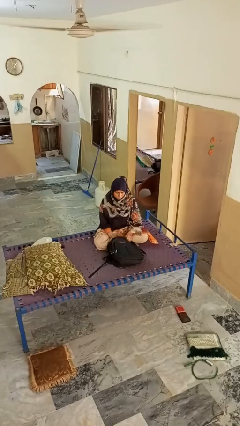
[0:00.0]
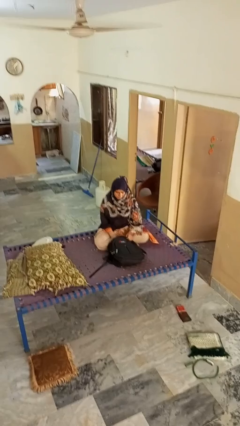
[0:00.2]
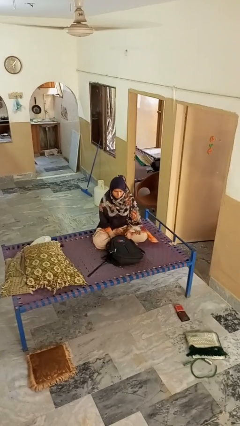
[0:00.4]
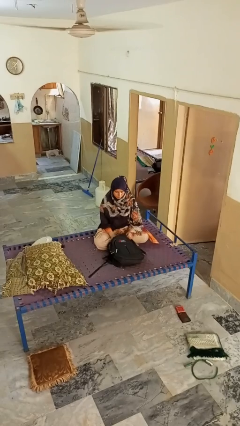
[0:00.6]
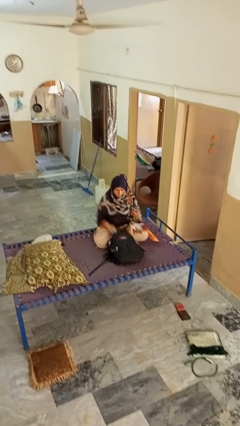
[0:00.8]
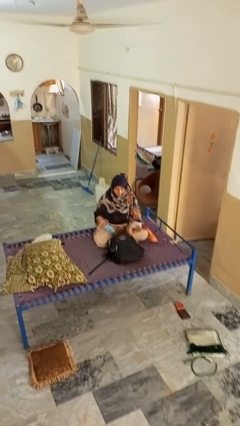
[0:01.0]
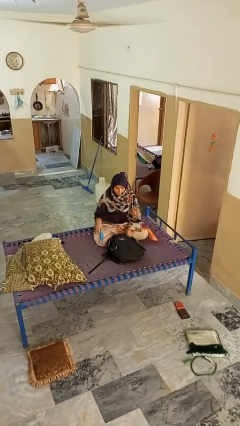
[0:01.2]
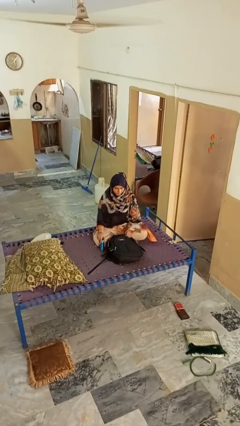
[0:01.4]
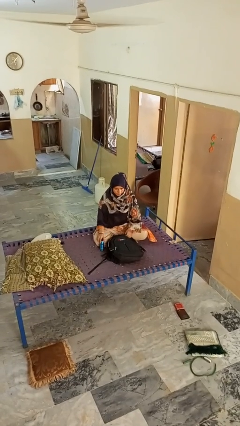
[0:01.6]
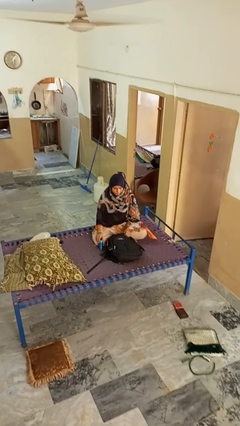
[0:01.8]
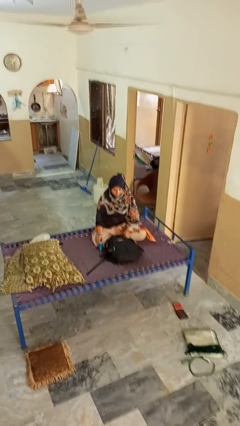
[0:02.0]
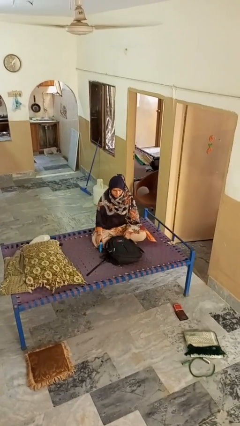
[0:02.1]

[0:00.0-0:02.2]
person takes object from bag

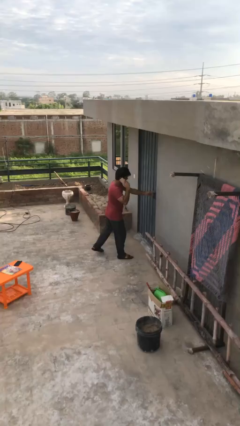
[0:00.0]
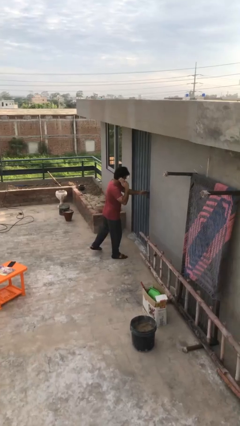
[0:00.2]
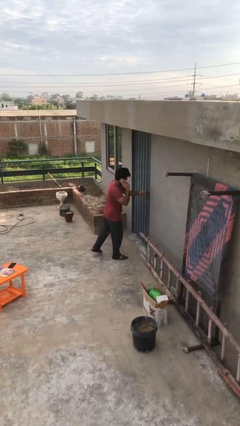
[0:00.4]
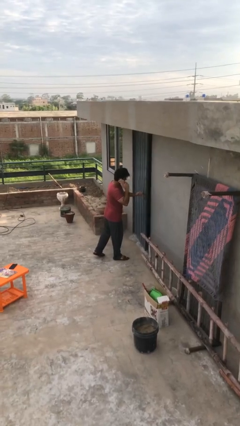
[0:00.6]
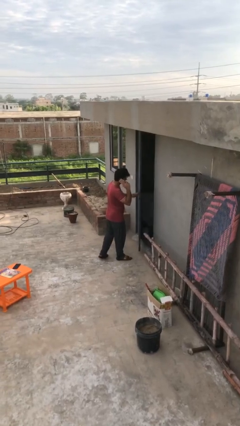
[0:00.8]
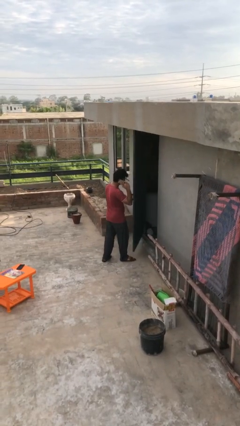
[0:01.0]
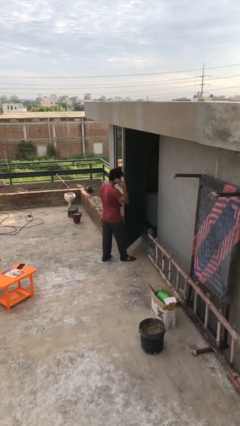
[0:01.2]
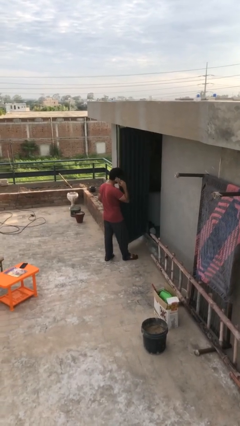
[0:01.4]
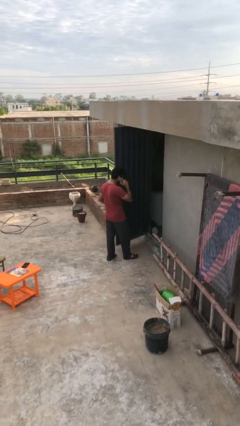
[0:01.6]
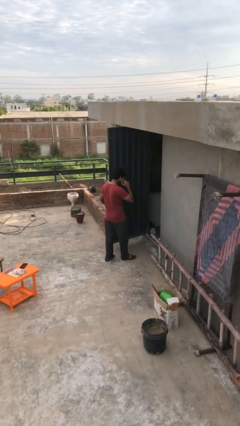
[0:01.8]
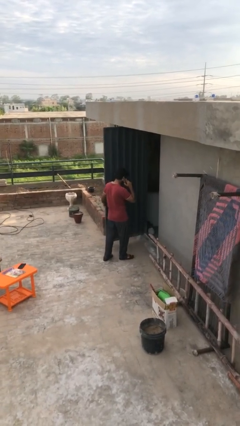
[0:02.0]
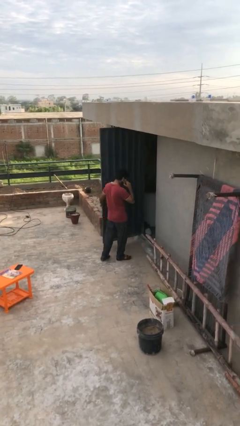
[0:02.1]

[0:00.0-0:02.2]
person opens facility door

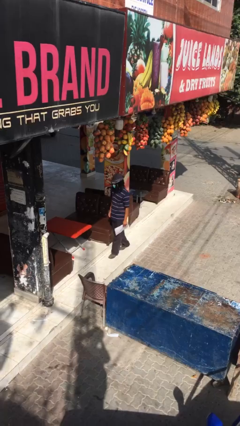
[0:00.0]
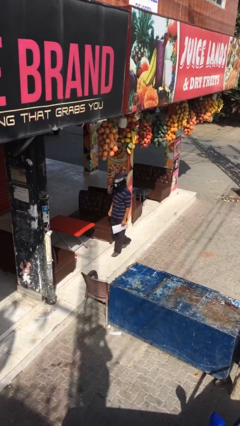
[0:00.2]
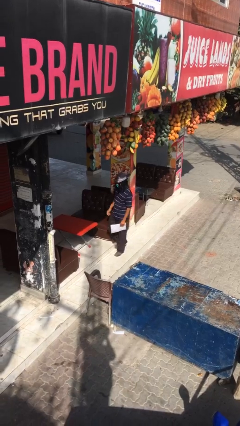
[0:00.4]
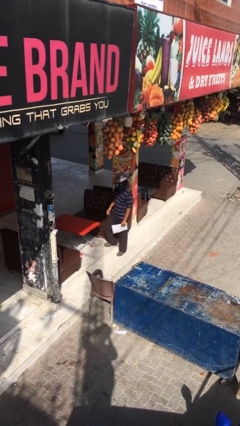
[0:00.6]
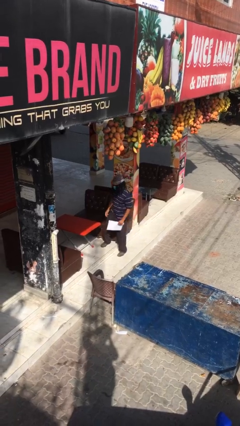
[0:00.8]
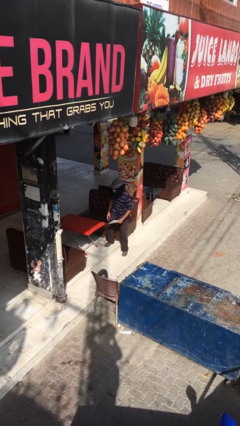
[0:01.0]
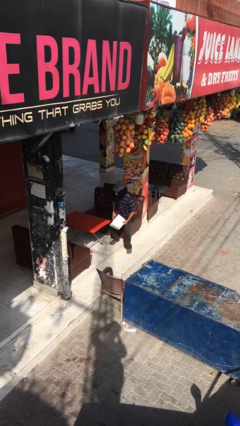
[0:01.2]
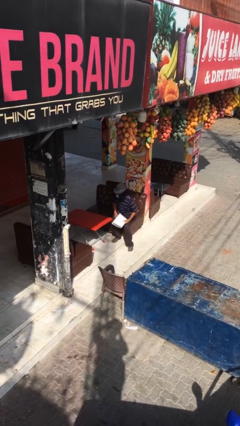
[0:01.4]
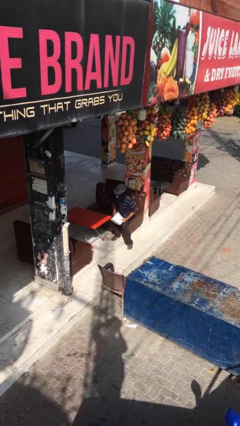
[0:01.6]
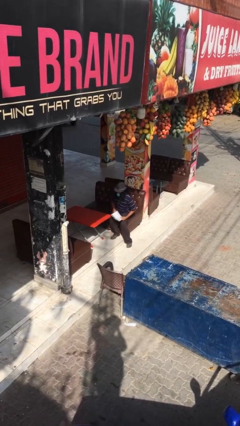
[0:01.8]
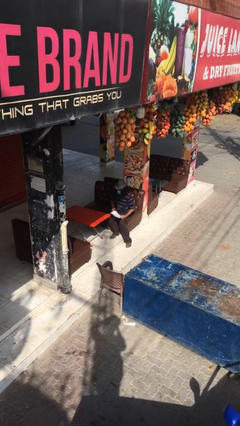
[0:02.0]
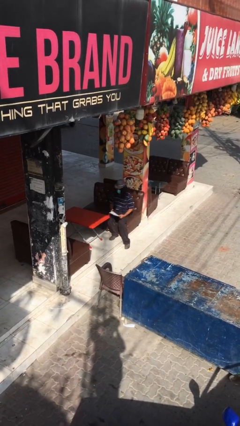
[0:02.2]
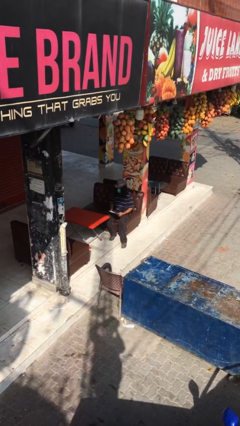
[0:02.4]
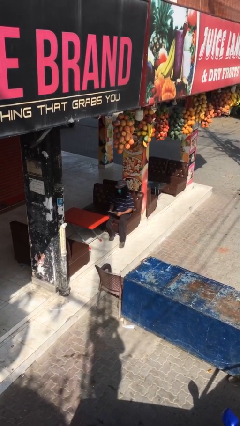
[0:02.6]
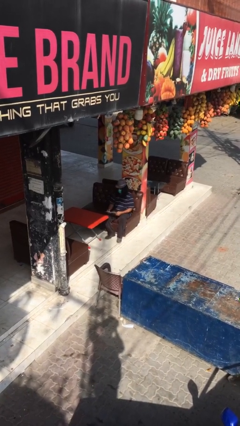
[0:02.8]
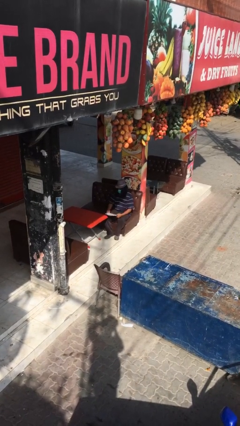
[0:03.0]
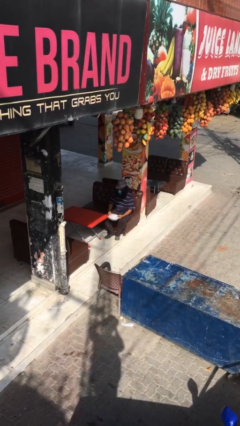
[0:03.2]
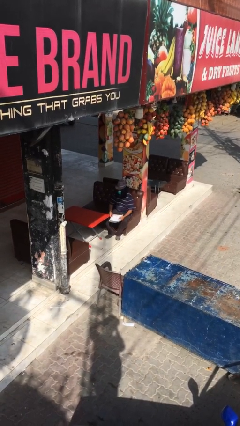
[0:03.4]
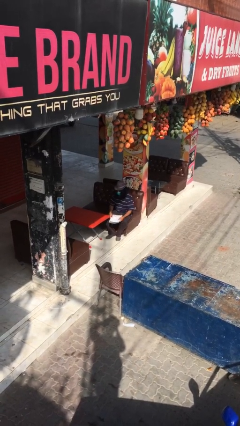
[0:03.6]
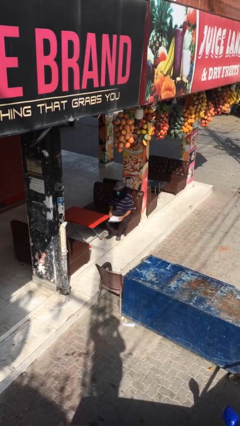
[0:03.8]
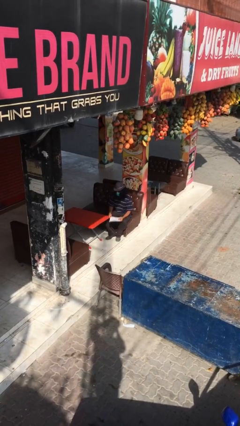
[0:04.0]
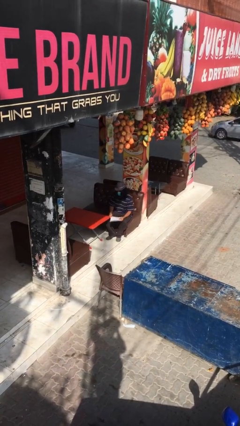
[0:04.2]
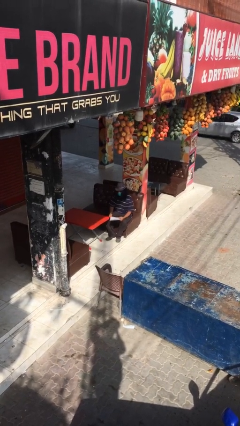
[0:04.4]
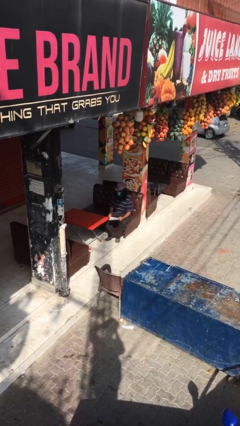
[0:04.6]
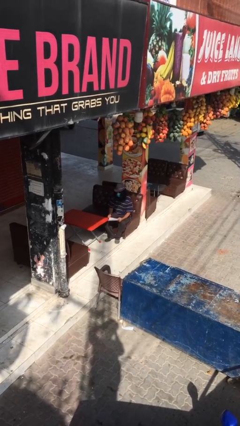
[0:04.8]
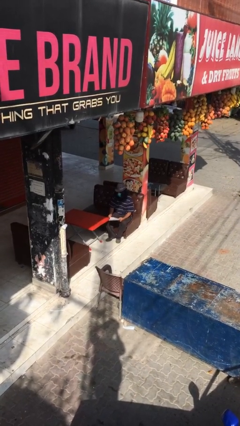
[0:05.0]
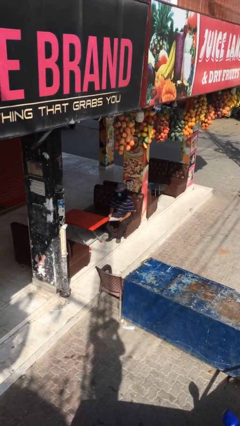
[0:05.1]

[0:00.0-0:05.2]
person sits down

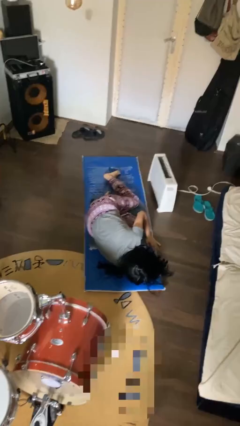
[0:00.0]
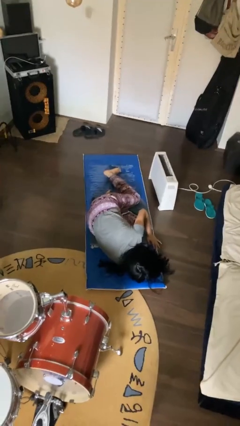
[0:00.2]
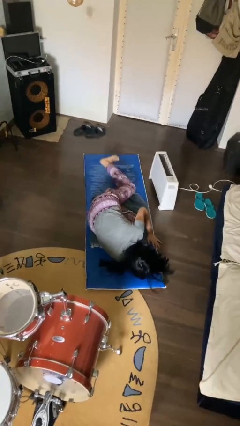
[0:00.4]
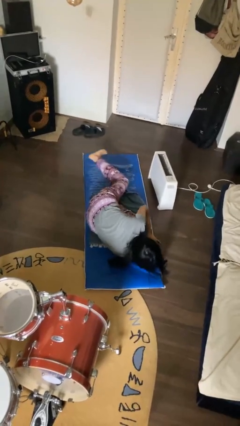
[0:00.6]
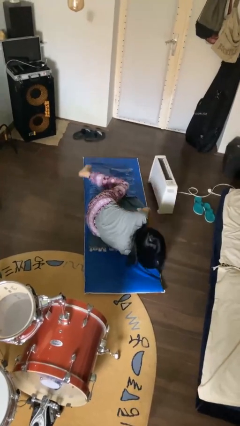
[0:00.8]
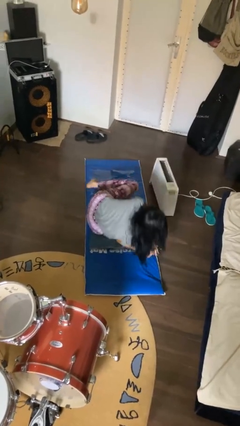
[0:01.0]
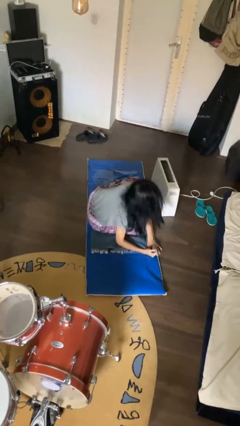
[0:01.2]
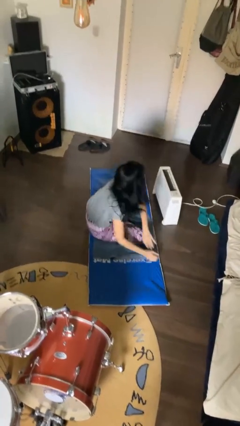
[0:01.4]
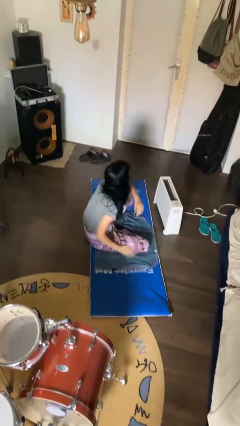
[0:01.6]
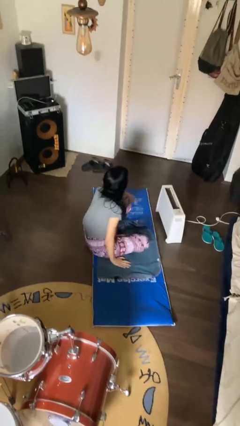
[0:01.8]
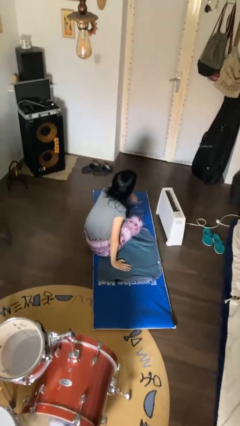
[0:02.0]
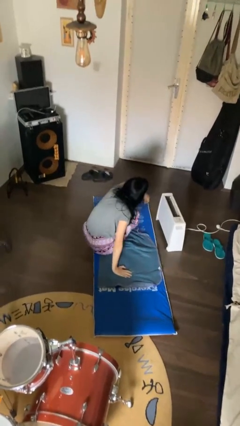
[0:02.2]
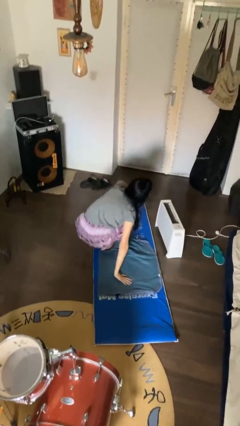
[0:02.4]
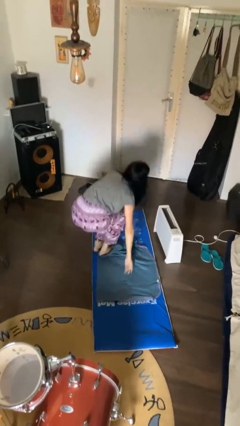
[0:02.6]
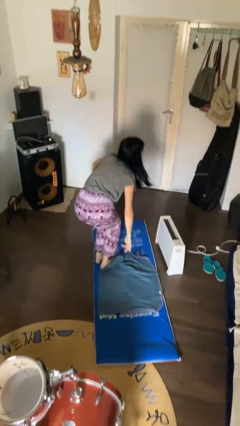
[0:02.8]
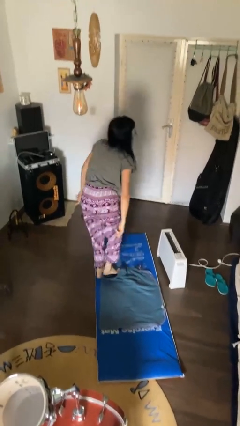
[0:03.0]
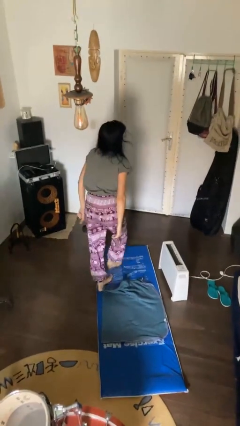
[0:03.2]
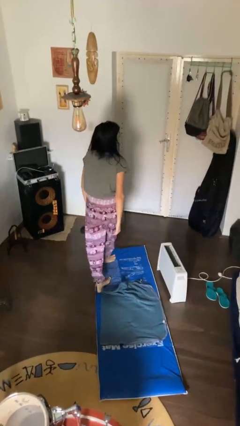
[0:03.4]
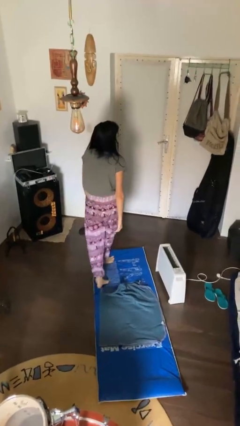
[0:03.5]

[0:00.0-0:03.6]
person stands up from floor

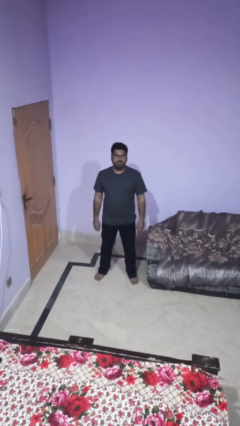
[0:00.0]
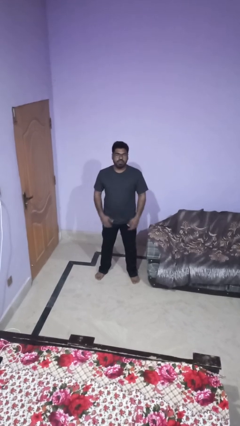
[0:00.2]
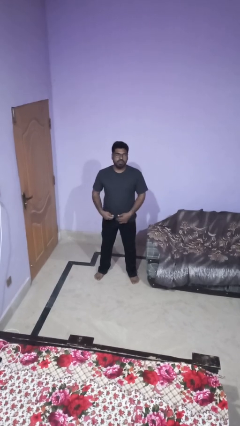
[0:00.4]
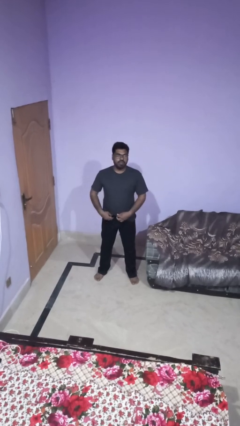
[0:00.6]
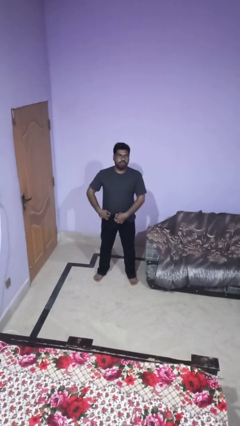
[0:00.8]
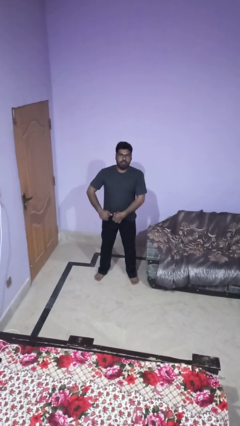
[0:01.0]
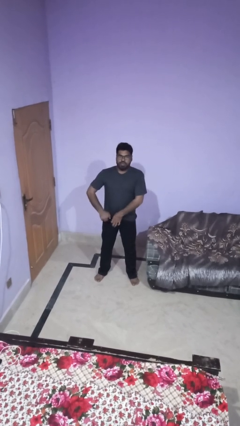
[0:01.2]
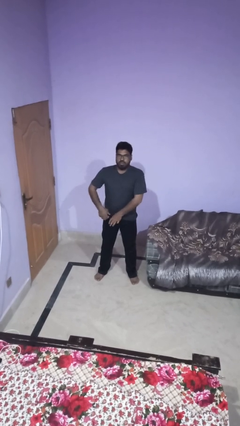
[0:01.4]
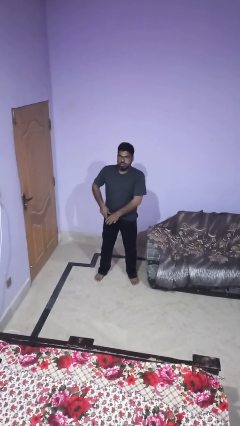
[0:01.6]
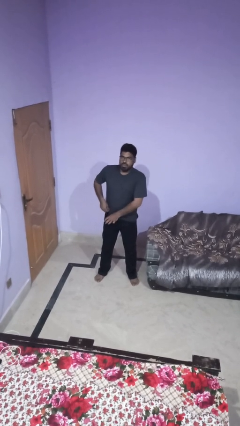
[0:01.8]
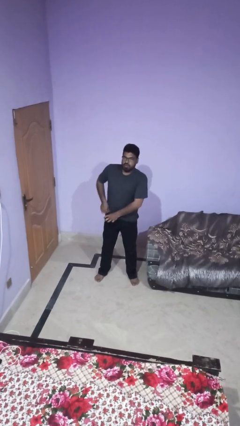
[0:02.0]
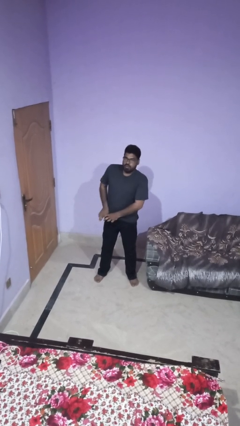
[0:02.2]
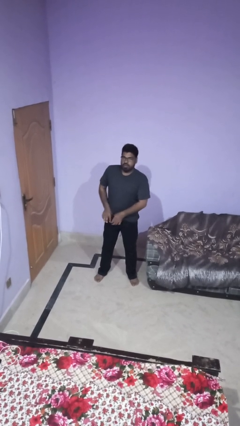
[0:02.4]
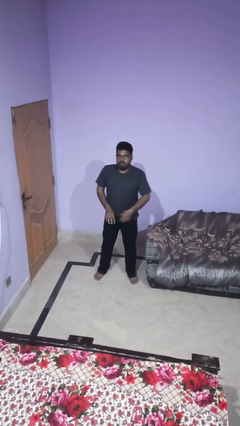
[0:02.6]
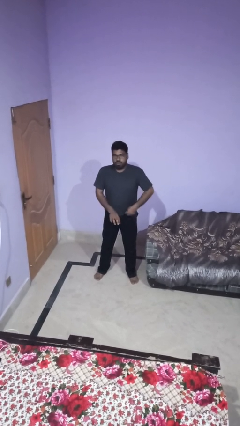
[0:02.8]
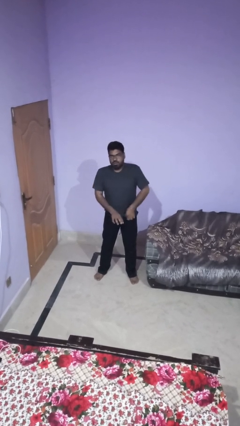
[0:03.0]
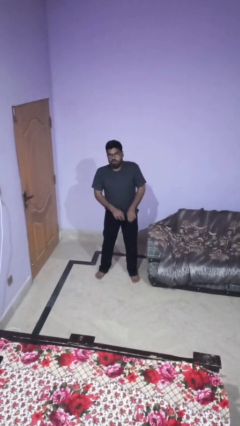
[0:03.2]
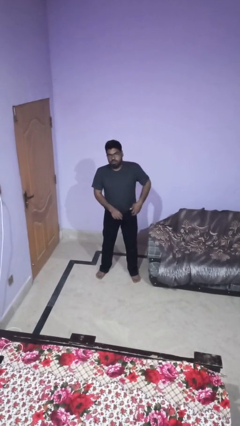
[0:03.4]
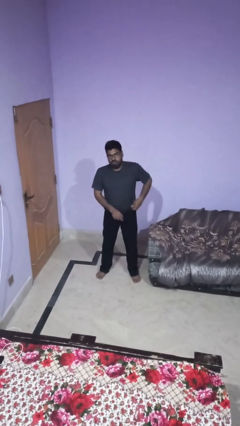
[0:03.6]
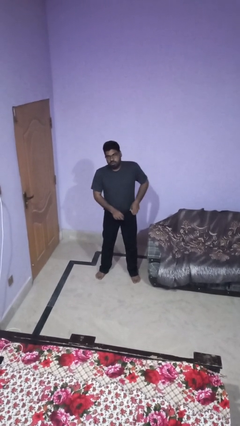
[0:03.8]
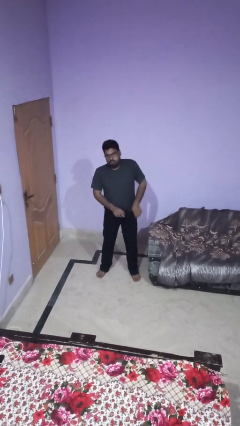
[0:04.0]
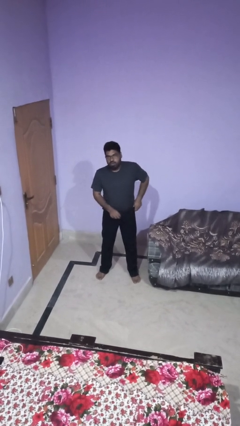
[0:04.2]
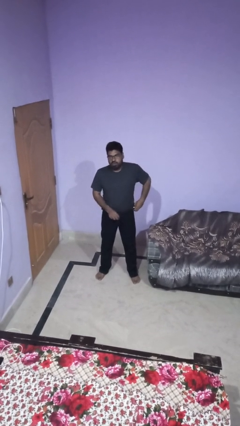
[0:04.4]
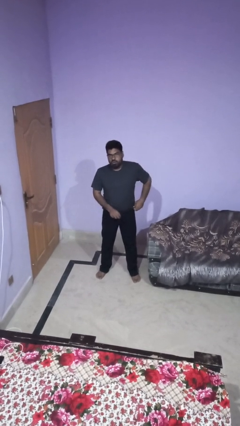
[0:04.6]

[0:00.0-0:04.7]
person tucks in shirt
